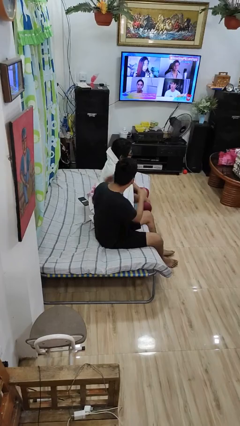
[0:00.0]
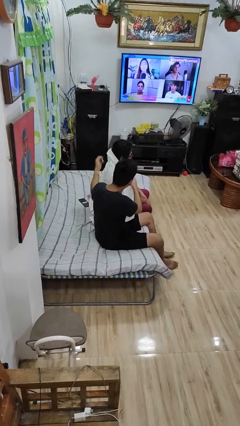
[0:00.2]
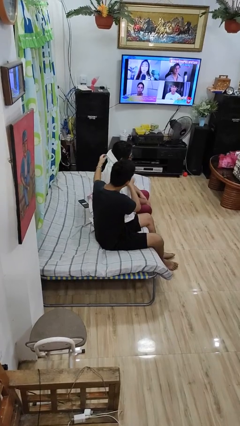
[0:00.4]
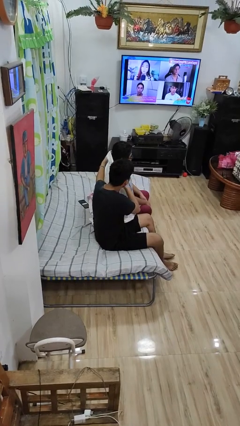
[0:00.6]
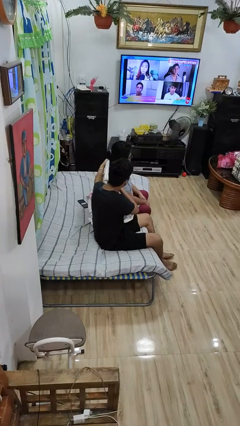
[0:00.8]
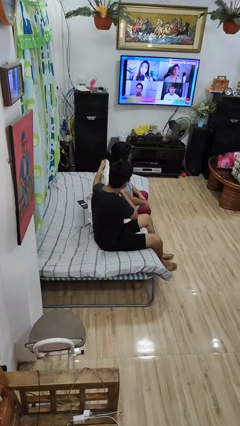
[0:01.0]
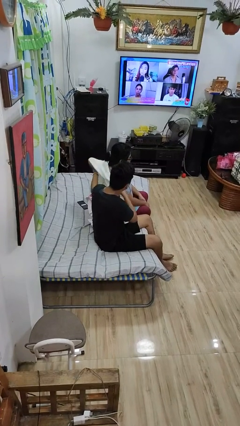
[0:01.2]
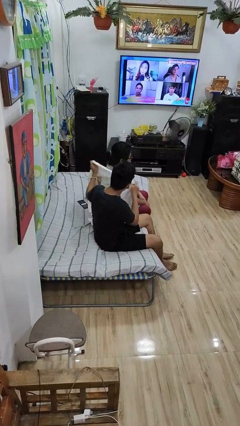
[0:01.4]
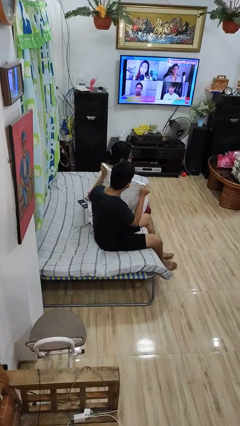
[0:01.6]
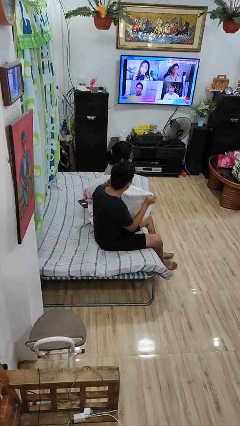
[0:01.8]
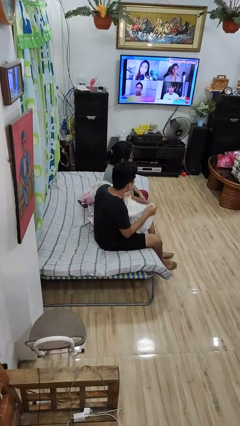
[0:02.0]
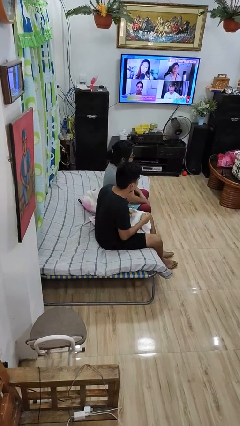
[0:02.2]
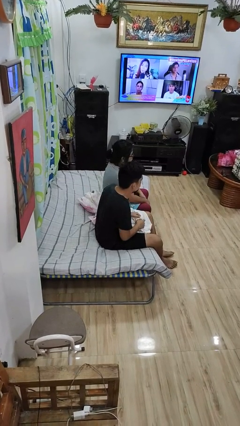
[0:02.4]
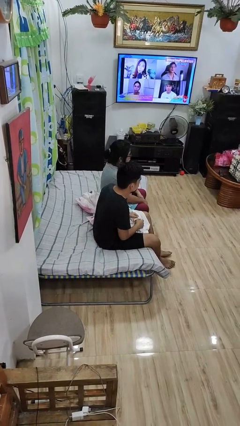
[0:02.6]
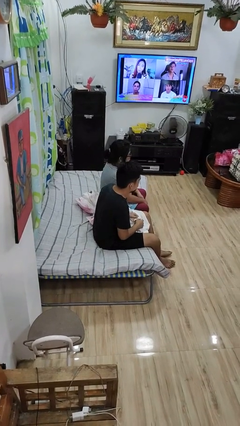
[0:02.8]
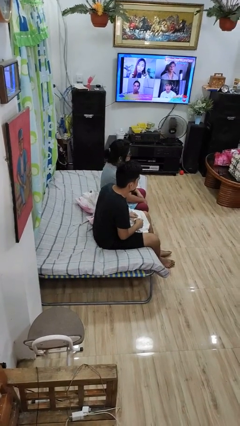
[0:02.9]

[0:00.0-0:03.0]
person uncovers friend with blanket

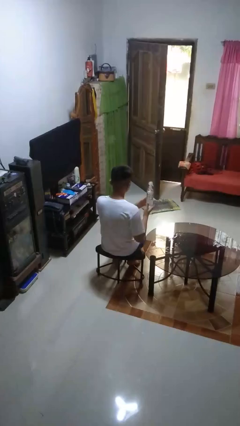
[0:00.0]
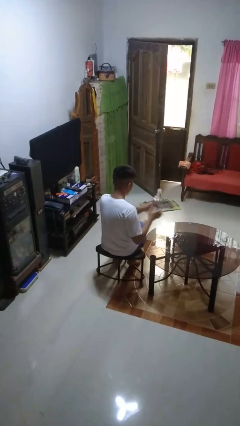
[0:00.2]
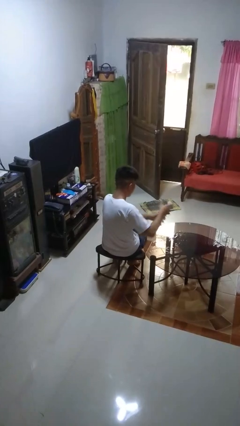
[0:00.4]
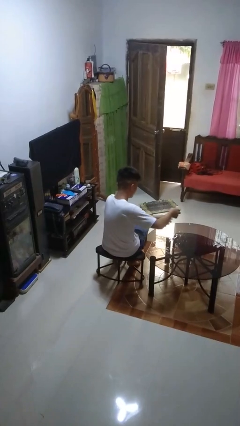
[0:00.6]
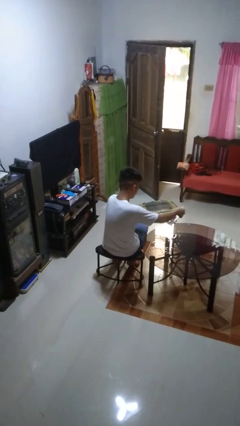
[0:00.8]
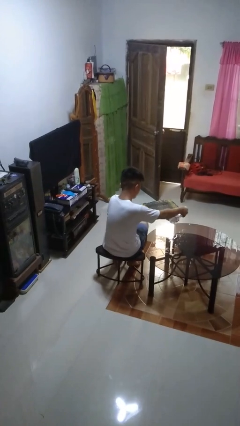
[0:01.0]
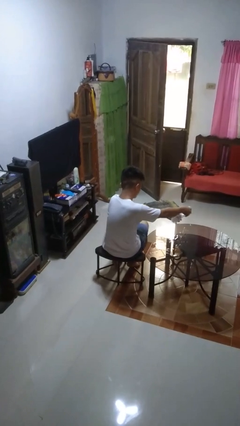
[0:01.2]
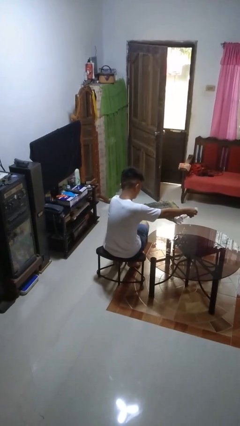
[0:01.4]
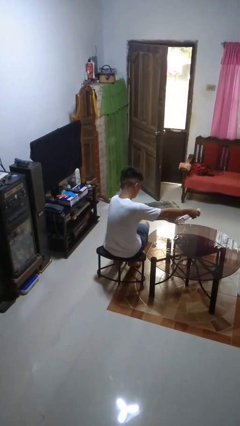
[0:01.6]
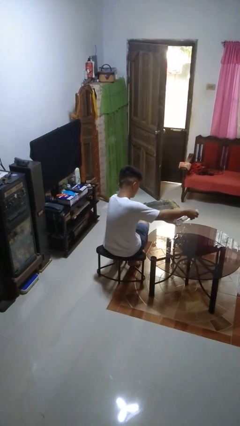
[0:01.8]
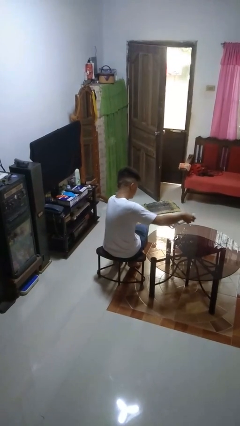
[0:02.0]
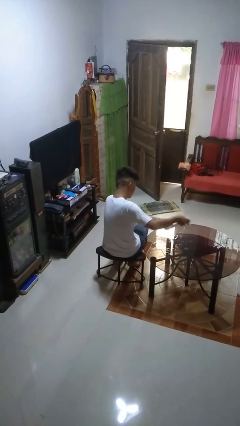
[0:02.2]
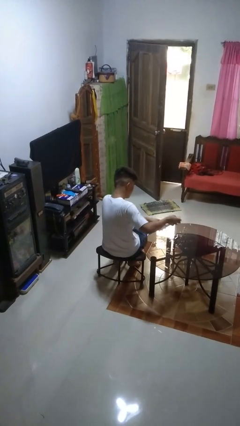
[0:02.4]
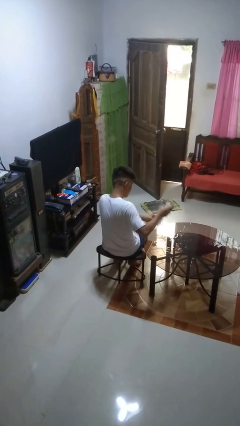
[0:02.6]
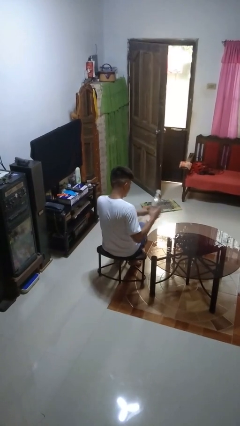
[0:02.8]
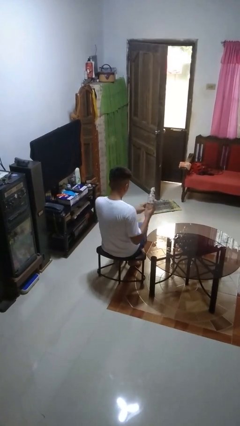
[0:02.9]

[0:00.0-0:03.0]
person sprays from bottle

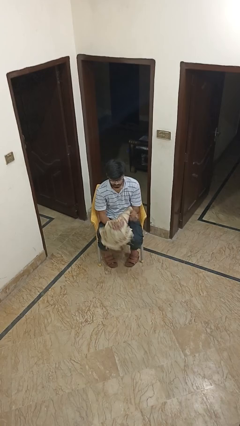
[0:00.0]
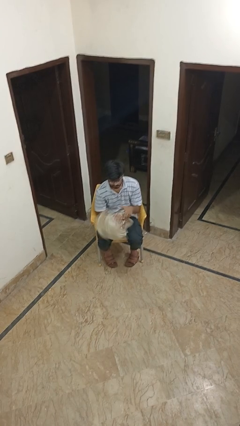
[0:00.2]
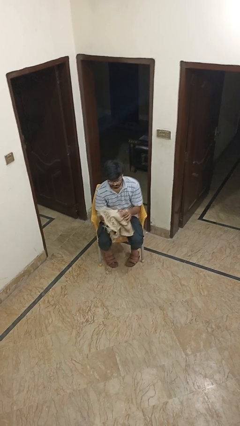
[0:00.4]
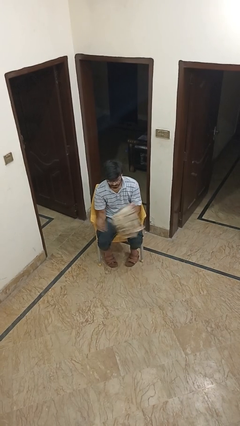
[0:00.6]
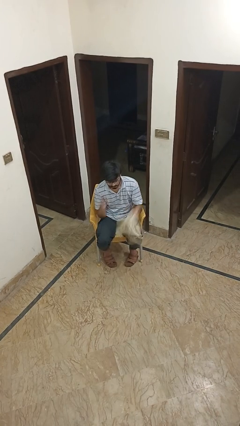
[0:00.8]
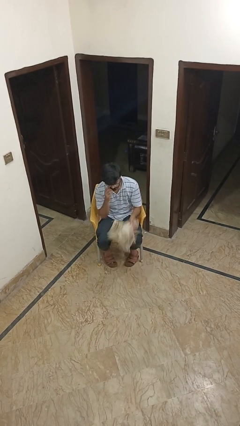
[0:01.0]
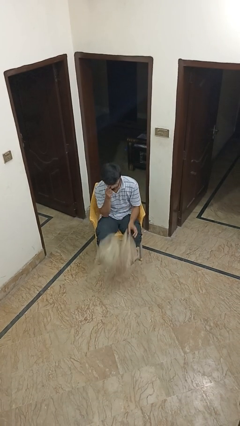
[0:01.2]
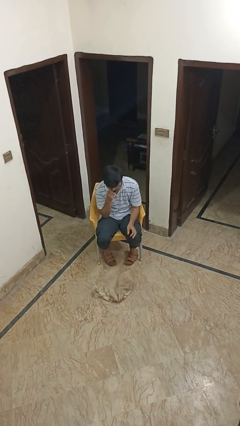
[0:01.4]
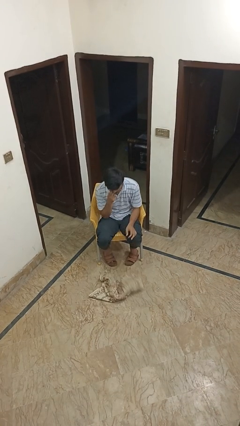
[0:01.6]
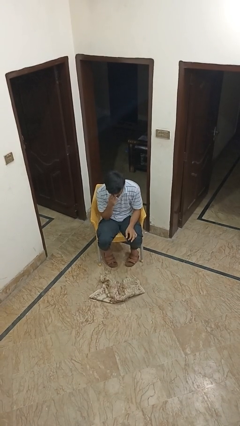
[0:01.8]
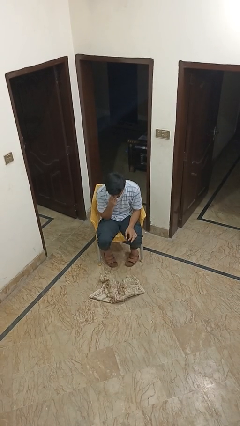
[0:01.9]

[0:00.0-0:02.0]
person drops object

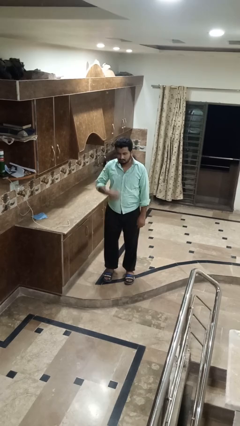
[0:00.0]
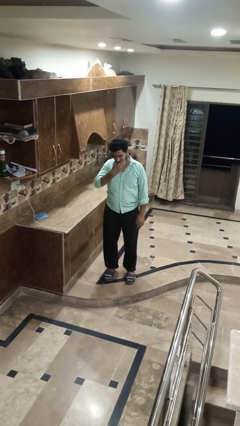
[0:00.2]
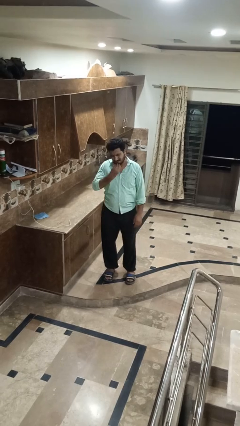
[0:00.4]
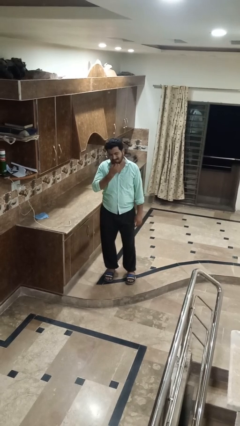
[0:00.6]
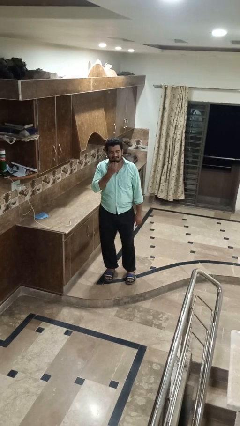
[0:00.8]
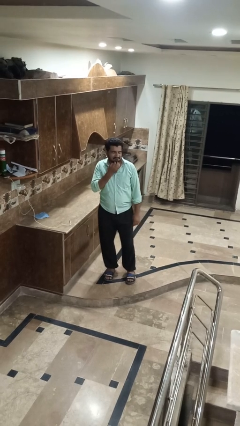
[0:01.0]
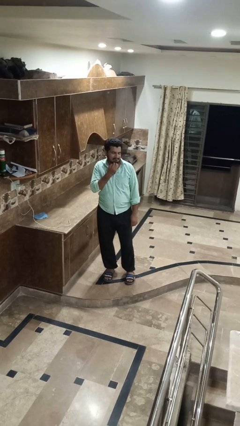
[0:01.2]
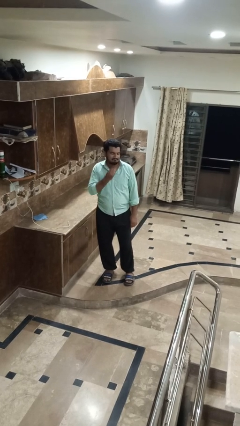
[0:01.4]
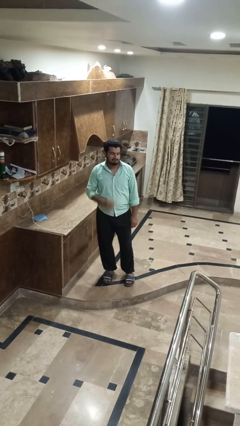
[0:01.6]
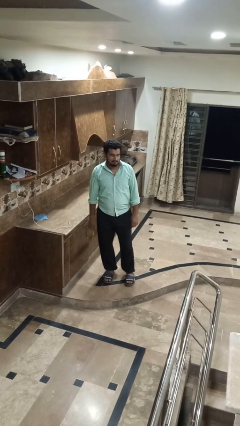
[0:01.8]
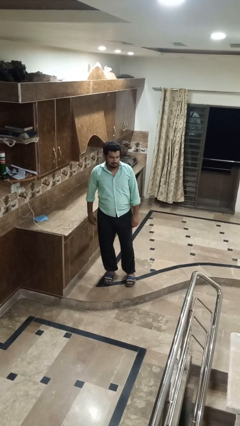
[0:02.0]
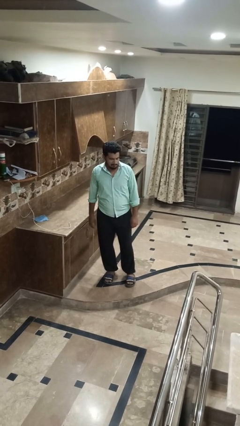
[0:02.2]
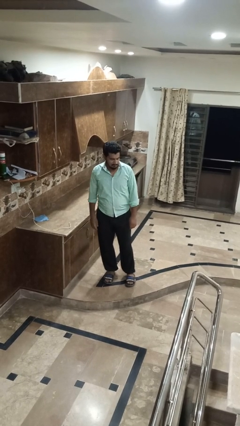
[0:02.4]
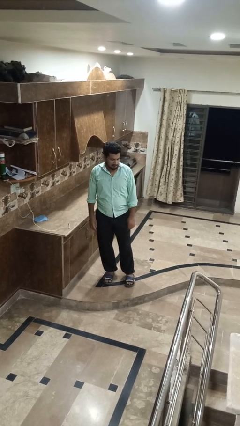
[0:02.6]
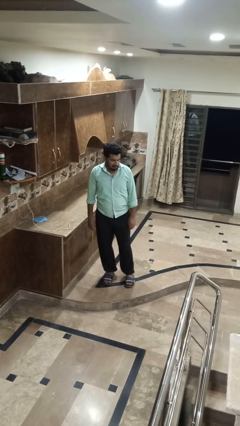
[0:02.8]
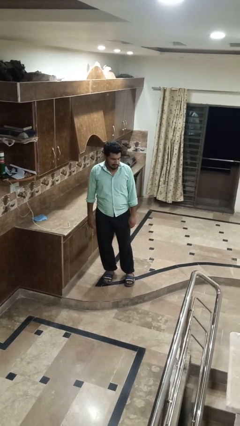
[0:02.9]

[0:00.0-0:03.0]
person strokes chin

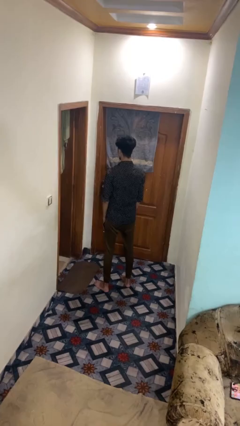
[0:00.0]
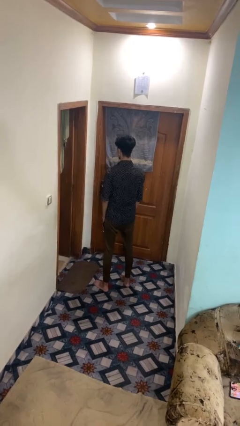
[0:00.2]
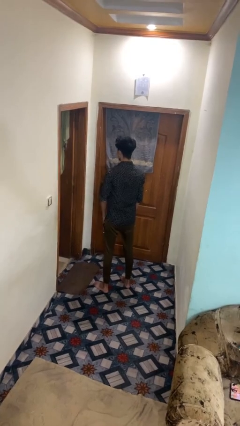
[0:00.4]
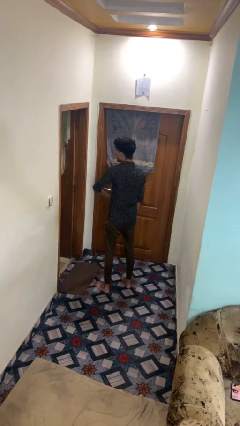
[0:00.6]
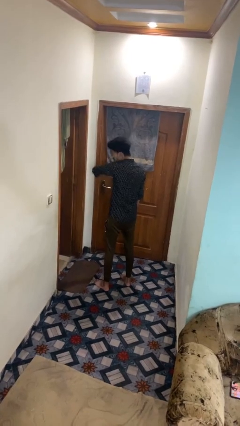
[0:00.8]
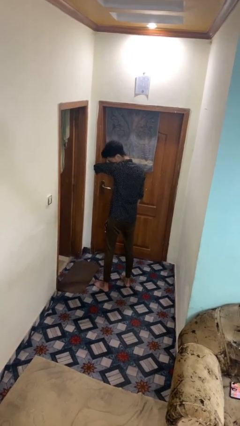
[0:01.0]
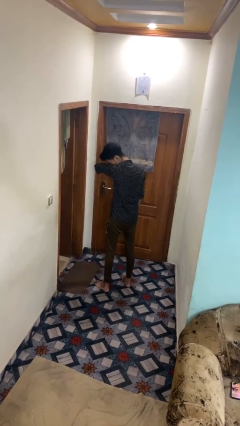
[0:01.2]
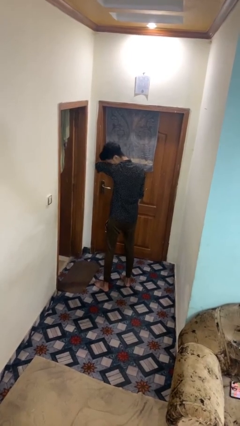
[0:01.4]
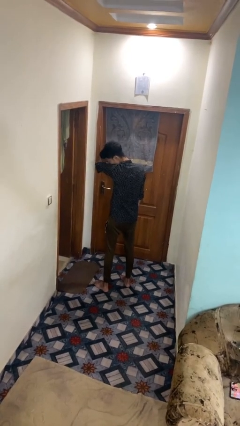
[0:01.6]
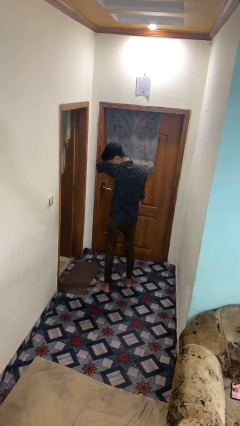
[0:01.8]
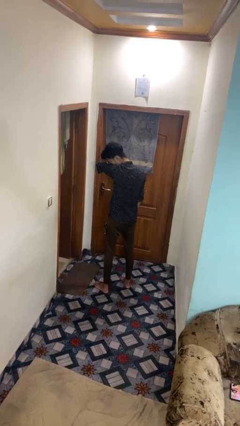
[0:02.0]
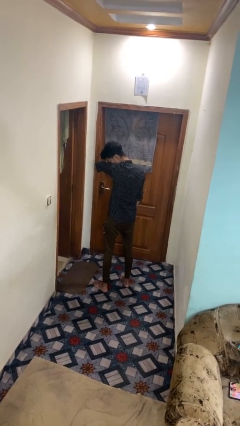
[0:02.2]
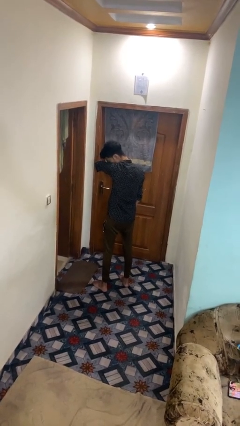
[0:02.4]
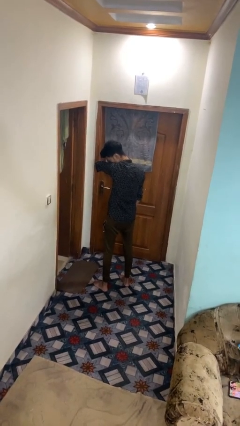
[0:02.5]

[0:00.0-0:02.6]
person sneezes into arm

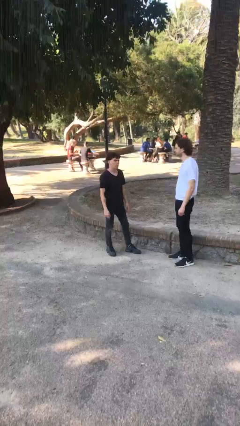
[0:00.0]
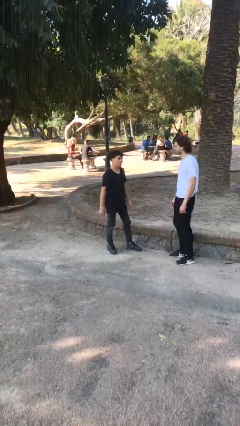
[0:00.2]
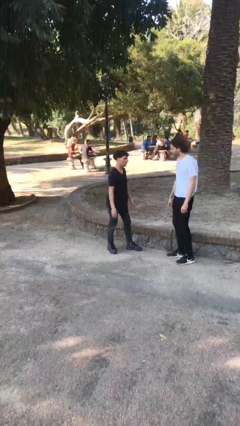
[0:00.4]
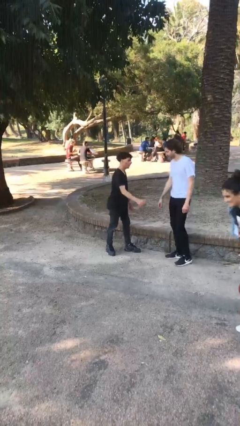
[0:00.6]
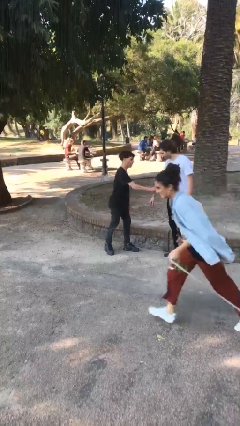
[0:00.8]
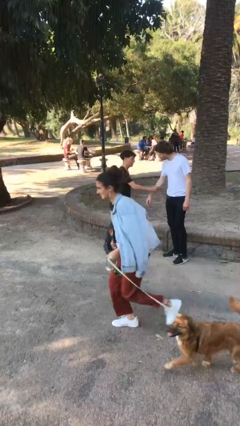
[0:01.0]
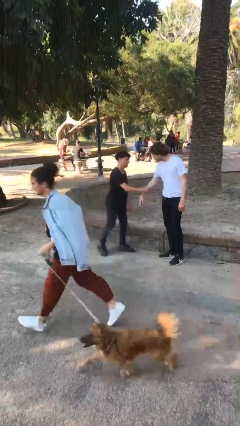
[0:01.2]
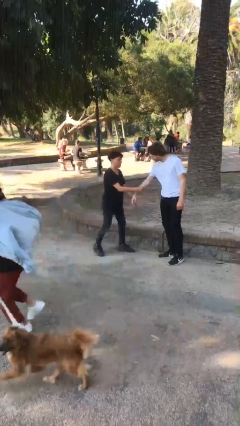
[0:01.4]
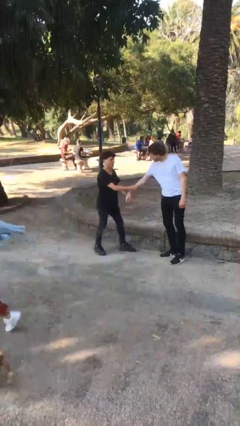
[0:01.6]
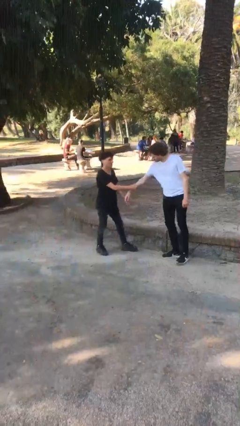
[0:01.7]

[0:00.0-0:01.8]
person grabs person by forearm

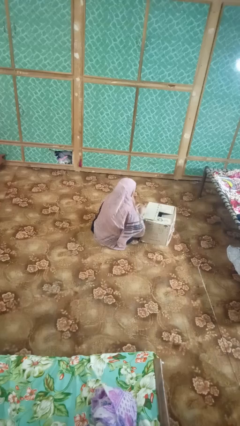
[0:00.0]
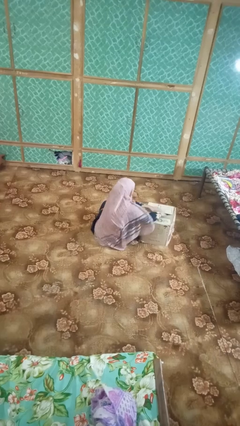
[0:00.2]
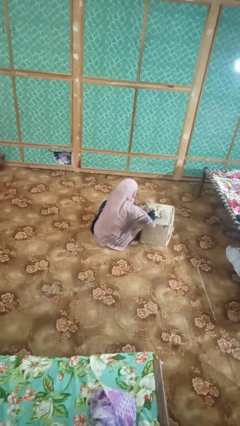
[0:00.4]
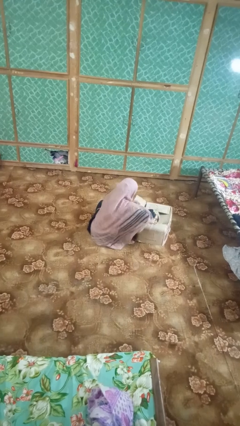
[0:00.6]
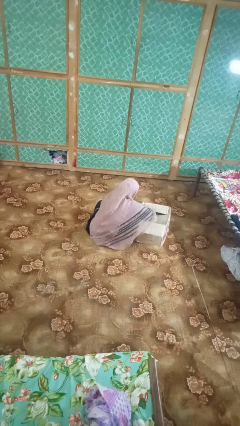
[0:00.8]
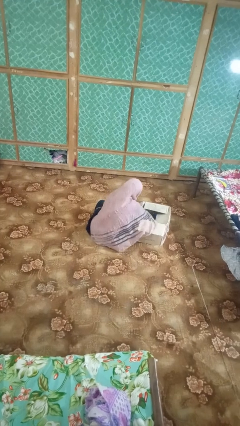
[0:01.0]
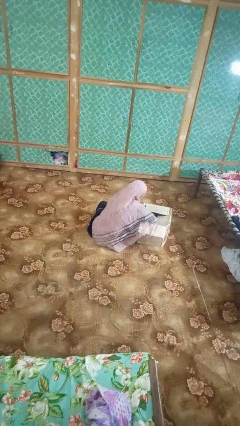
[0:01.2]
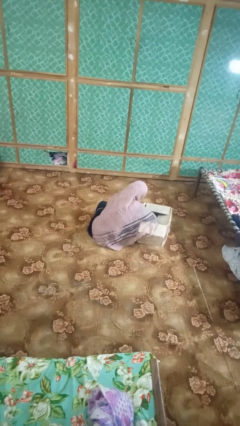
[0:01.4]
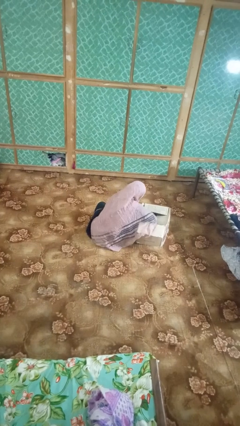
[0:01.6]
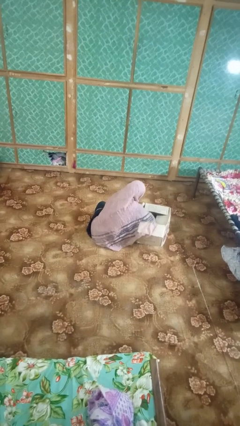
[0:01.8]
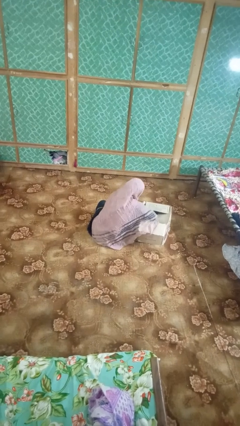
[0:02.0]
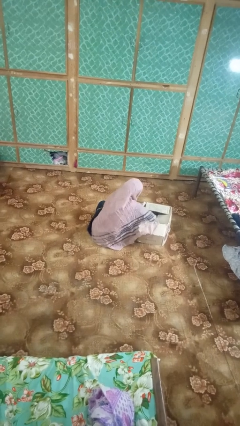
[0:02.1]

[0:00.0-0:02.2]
person searches in box
